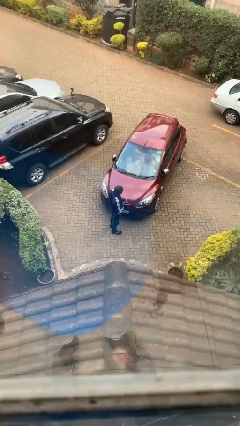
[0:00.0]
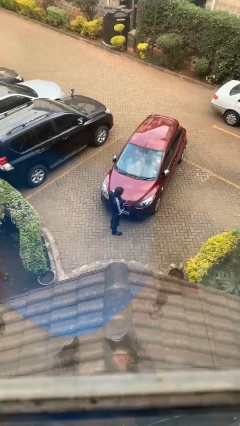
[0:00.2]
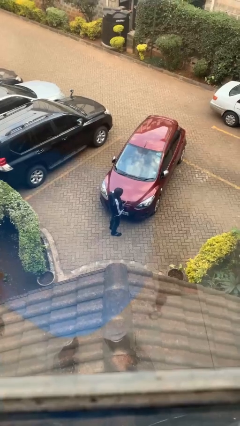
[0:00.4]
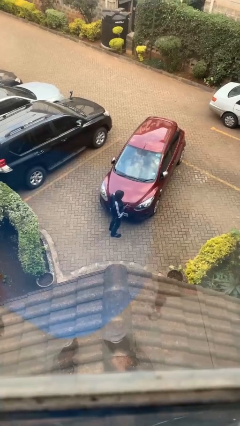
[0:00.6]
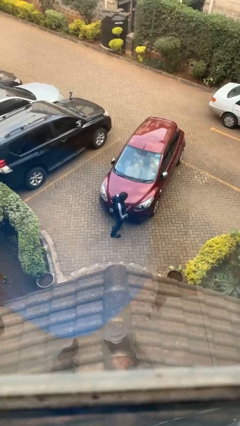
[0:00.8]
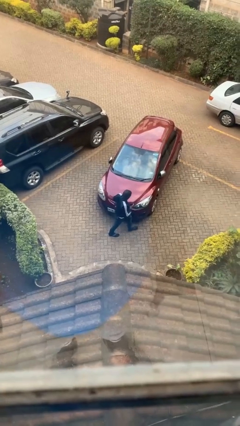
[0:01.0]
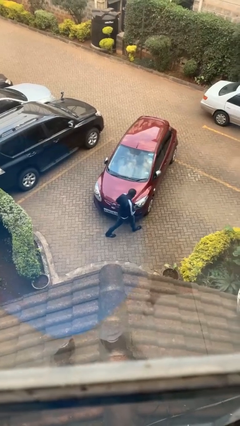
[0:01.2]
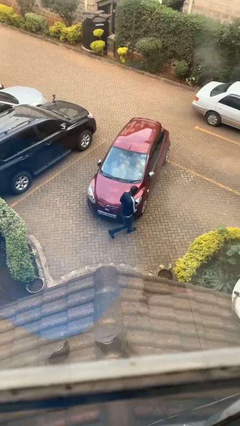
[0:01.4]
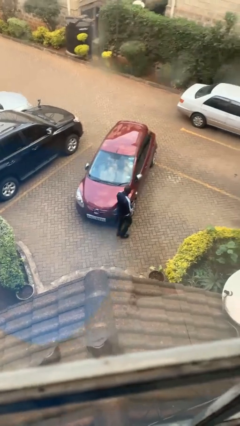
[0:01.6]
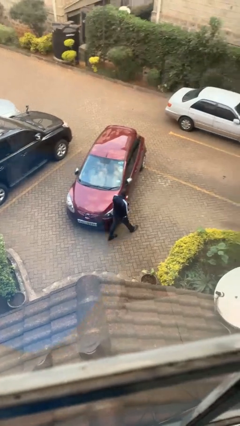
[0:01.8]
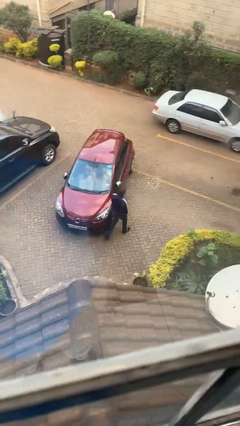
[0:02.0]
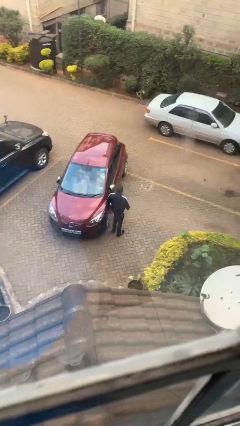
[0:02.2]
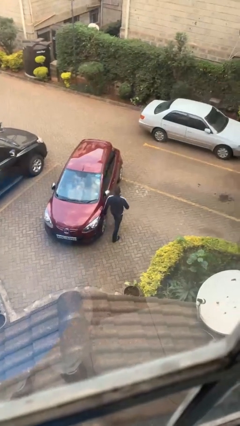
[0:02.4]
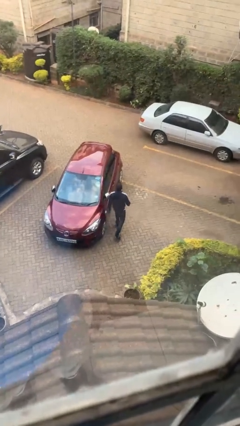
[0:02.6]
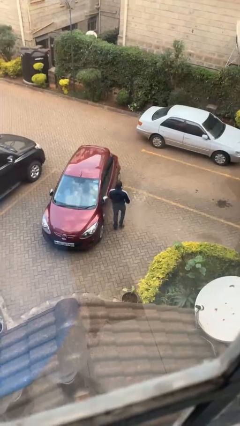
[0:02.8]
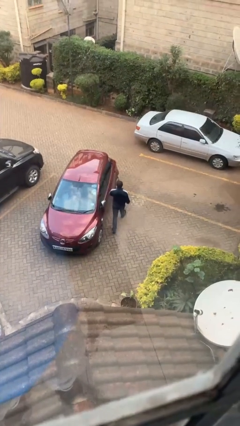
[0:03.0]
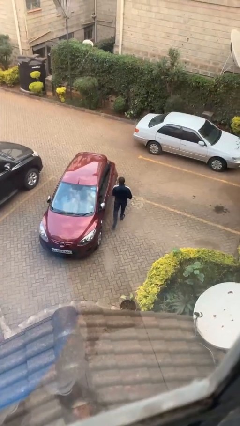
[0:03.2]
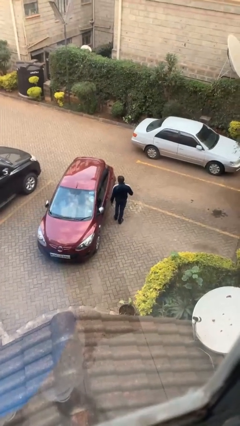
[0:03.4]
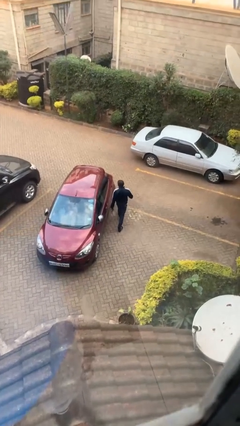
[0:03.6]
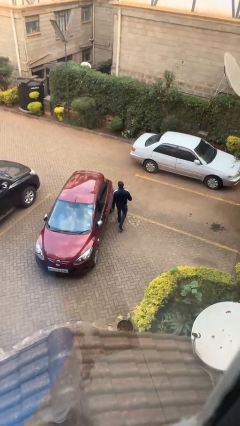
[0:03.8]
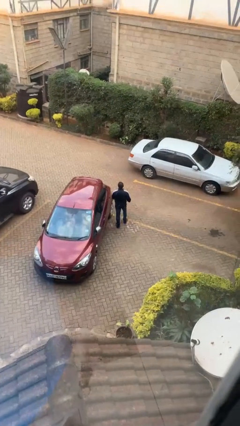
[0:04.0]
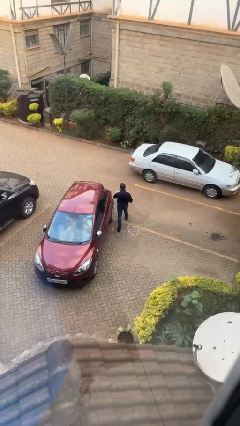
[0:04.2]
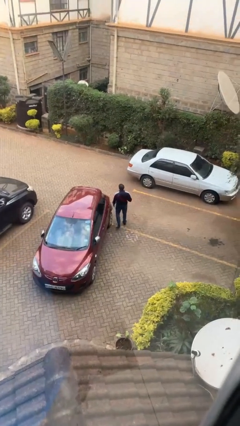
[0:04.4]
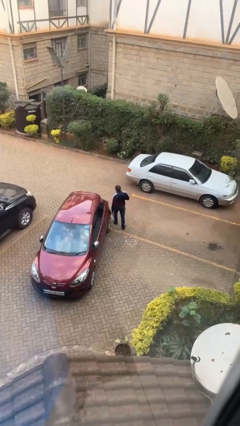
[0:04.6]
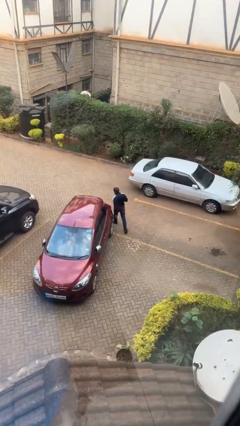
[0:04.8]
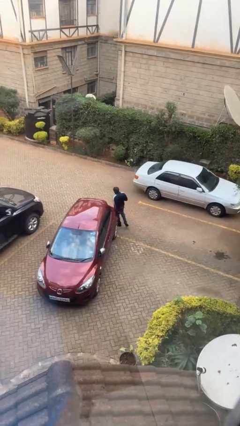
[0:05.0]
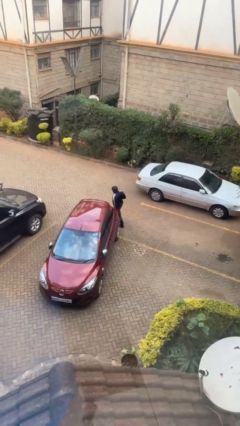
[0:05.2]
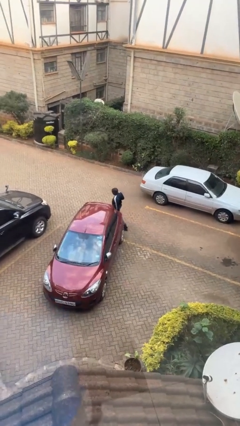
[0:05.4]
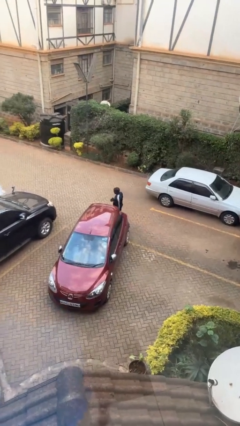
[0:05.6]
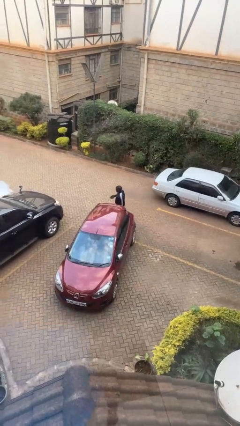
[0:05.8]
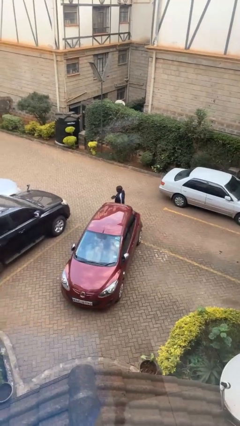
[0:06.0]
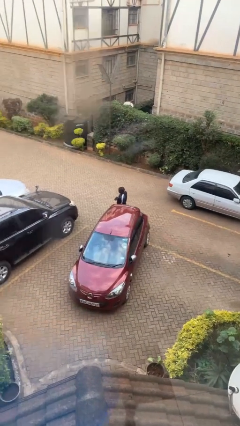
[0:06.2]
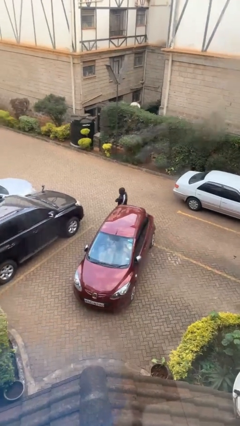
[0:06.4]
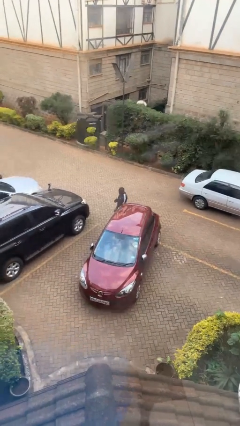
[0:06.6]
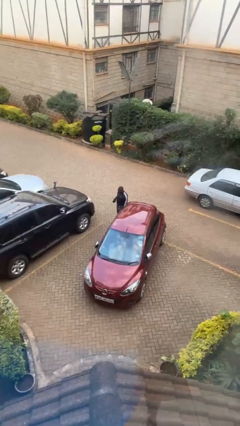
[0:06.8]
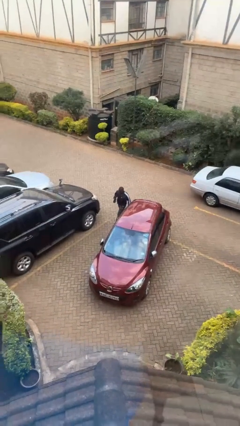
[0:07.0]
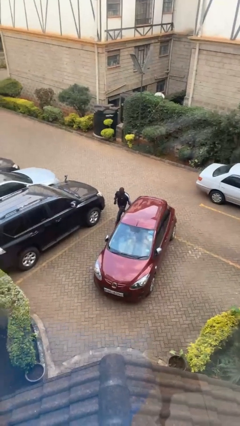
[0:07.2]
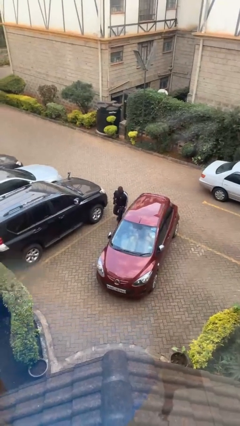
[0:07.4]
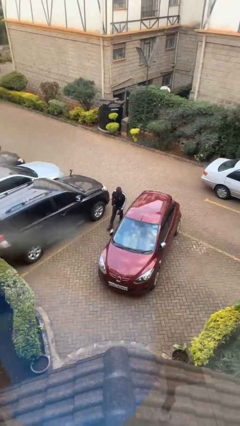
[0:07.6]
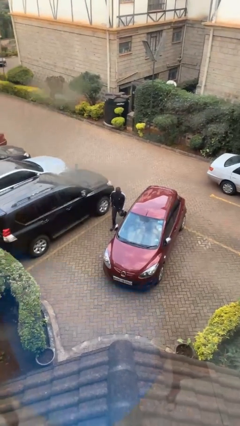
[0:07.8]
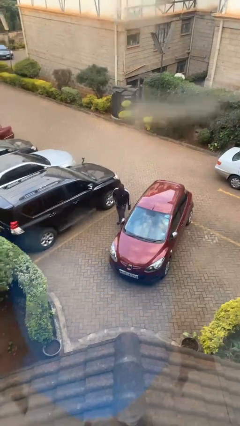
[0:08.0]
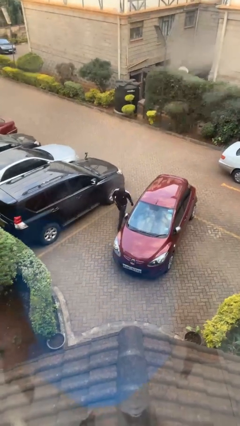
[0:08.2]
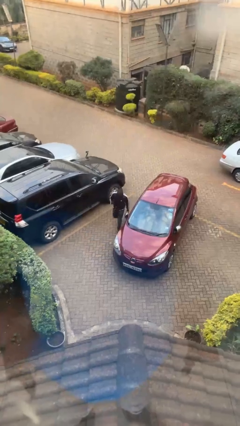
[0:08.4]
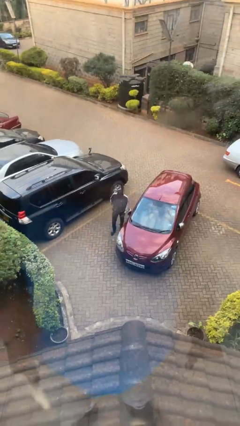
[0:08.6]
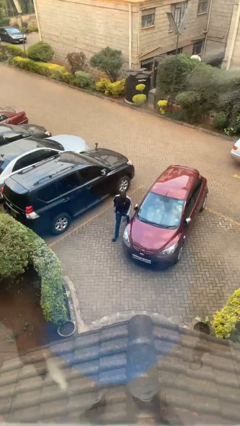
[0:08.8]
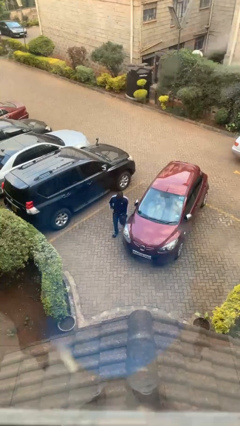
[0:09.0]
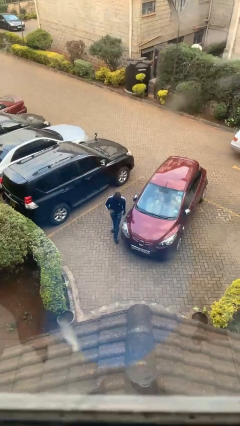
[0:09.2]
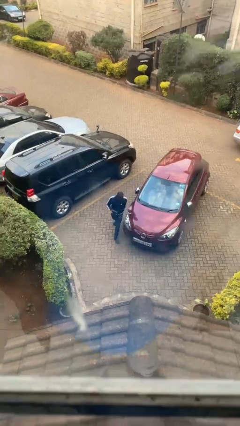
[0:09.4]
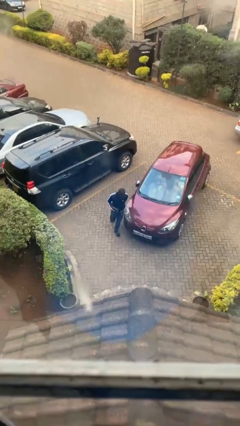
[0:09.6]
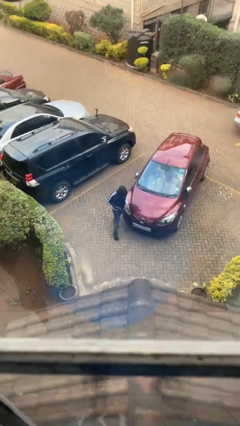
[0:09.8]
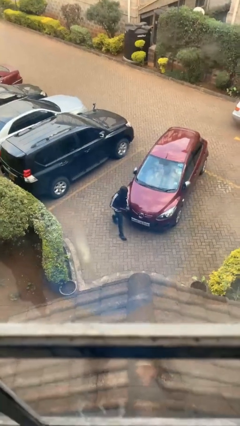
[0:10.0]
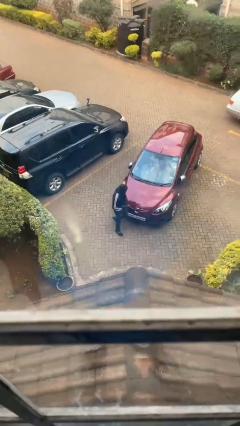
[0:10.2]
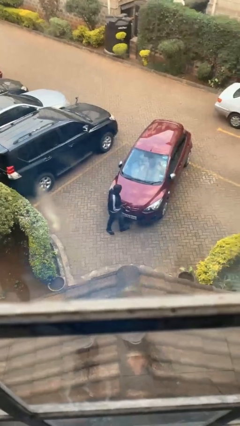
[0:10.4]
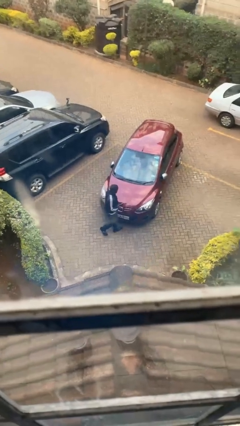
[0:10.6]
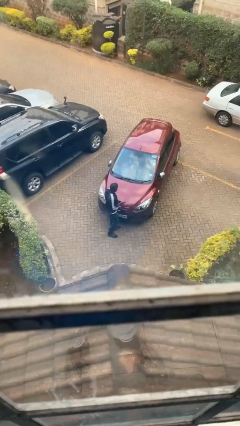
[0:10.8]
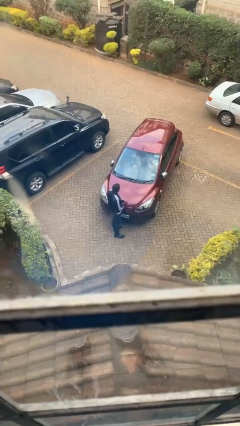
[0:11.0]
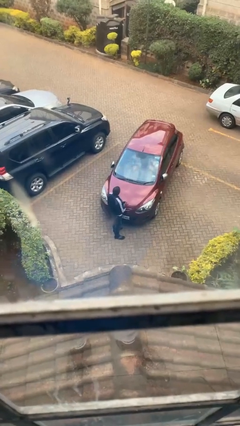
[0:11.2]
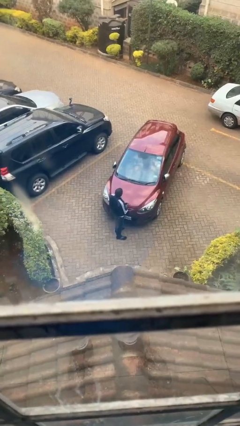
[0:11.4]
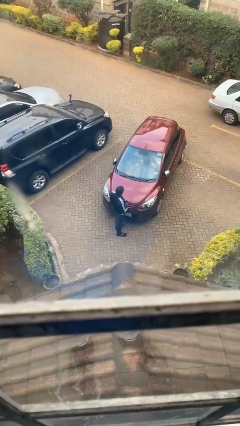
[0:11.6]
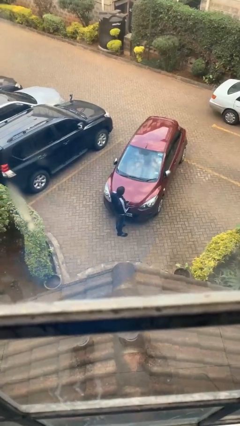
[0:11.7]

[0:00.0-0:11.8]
person walks around car

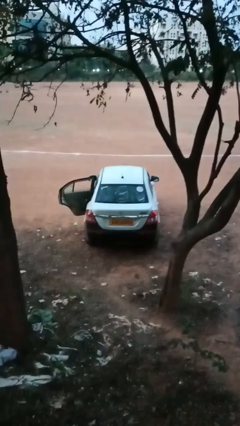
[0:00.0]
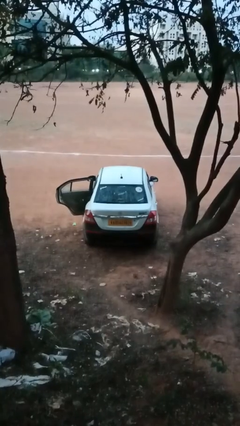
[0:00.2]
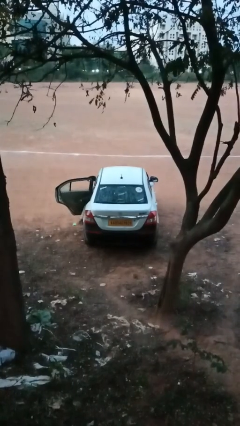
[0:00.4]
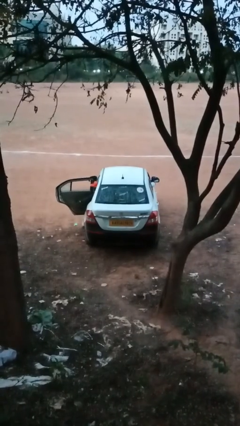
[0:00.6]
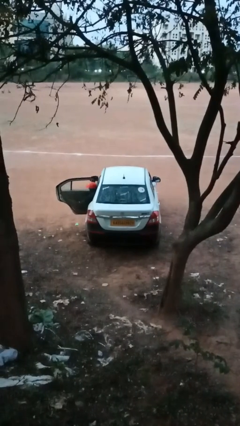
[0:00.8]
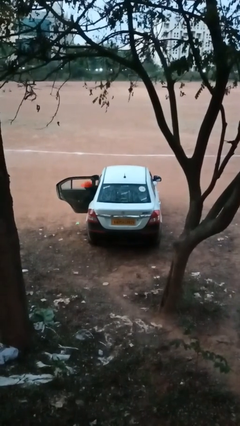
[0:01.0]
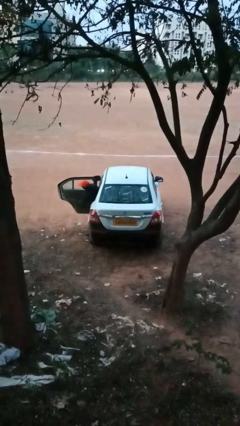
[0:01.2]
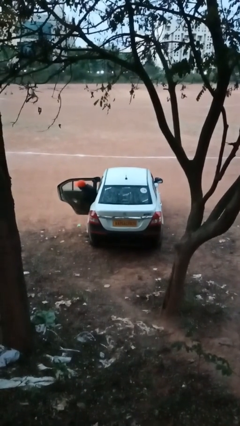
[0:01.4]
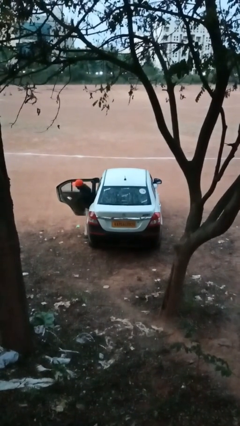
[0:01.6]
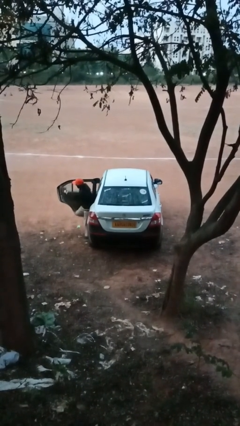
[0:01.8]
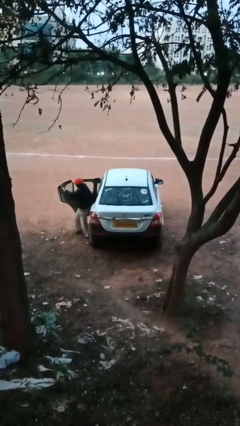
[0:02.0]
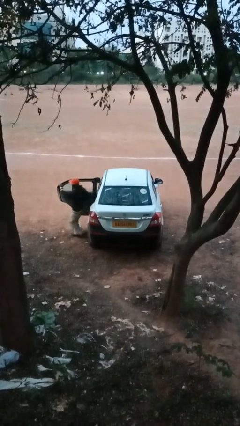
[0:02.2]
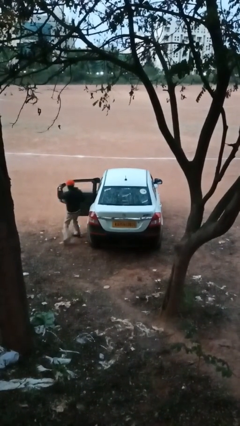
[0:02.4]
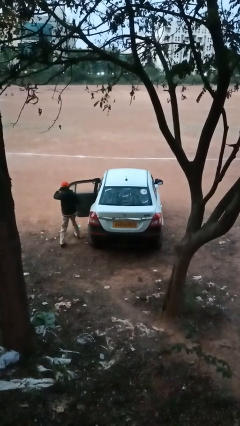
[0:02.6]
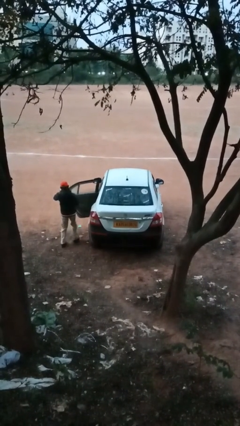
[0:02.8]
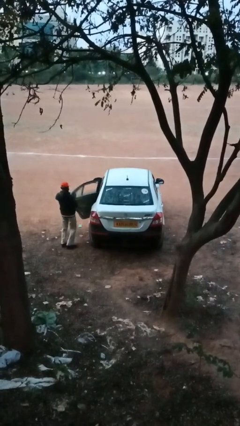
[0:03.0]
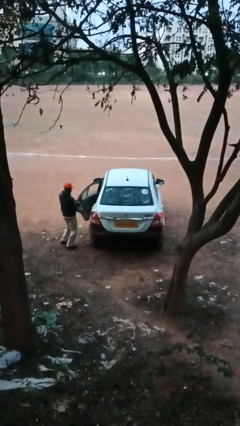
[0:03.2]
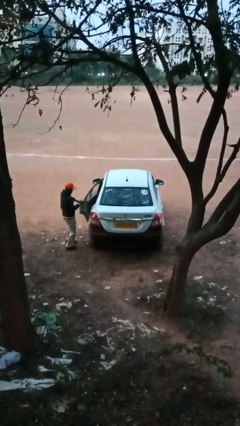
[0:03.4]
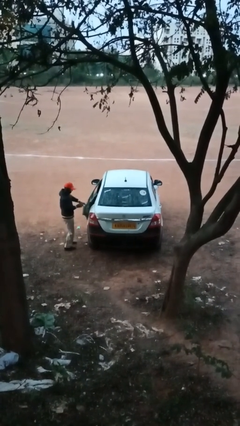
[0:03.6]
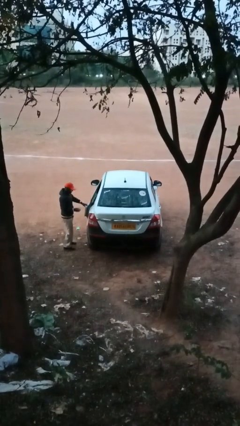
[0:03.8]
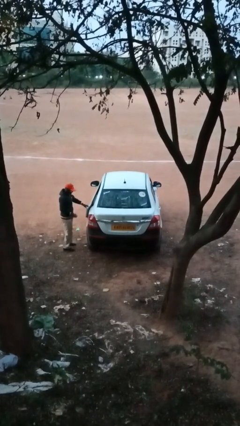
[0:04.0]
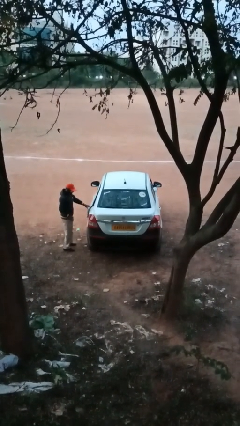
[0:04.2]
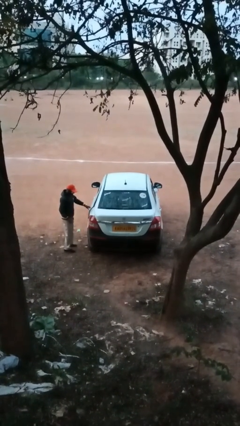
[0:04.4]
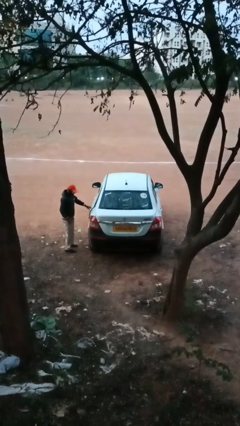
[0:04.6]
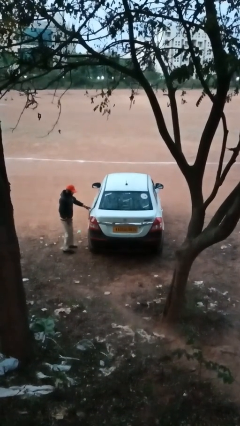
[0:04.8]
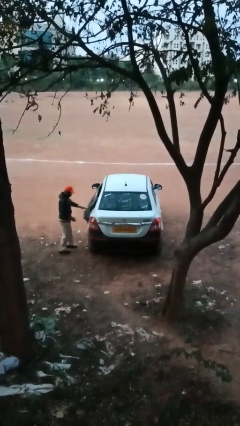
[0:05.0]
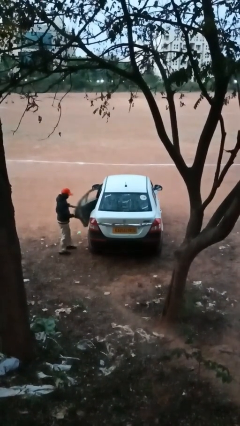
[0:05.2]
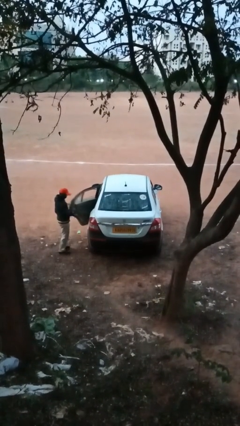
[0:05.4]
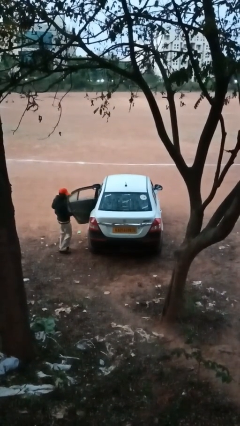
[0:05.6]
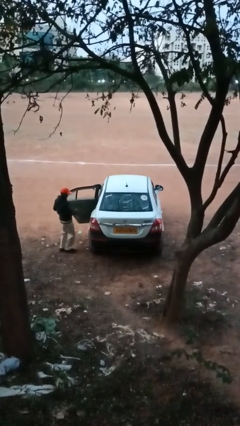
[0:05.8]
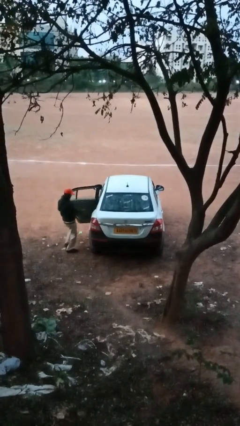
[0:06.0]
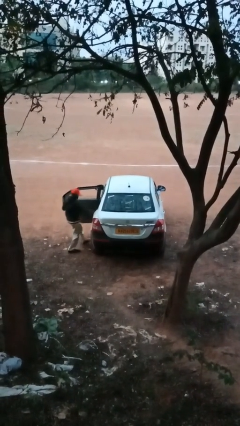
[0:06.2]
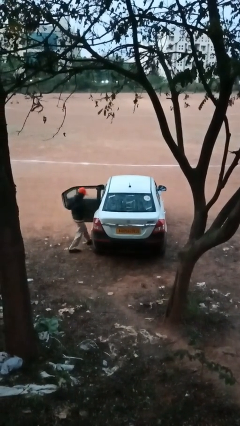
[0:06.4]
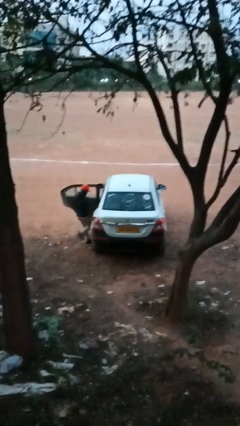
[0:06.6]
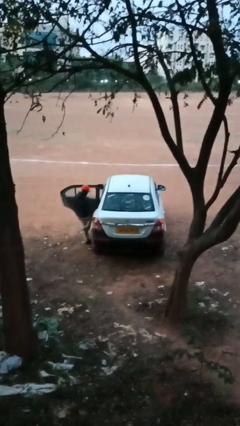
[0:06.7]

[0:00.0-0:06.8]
car drops off person
